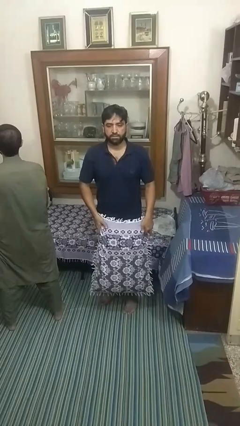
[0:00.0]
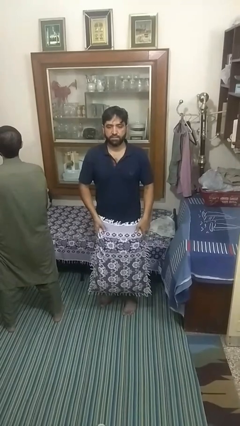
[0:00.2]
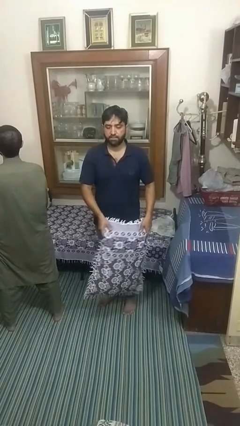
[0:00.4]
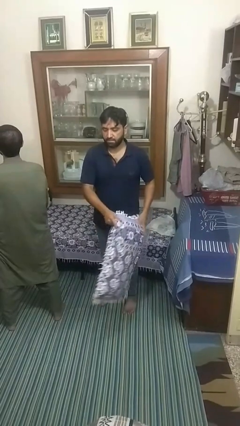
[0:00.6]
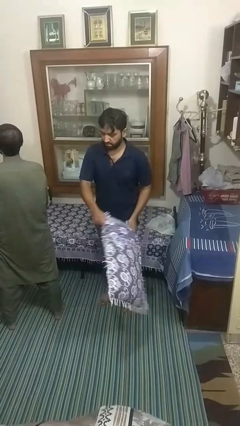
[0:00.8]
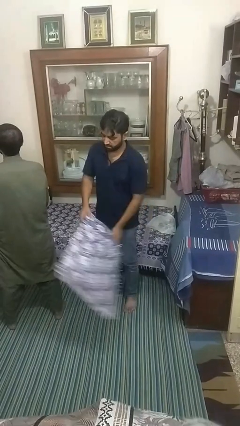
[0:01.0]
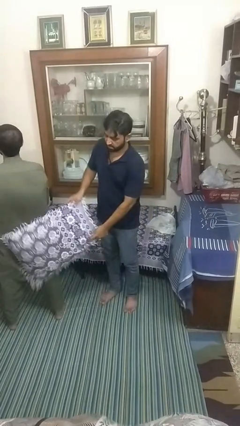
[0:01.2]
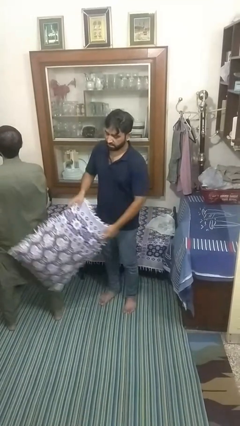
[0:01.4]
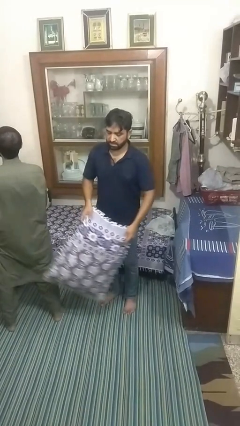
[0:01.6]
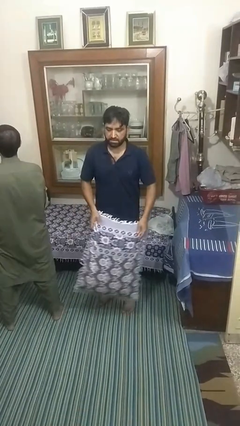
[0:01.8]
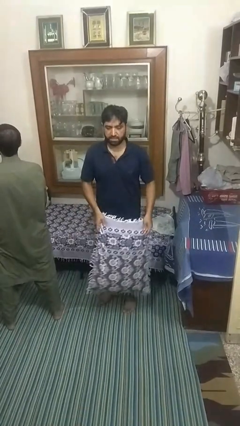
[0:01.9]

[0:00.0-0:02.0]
person hits person with pillow

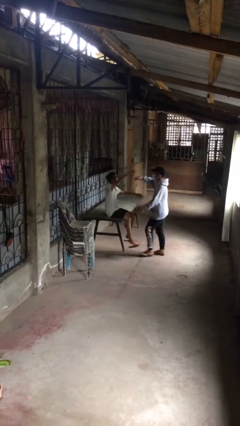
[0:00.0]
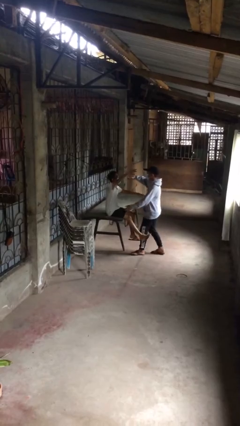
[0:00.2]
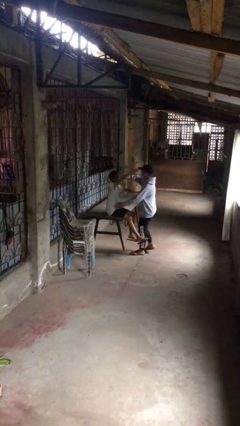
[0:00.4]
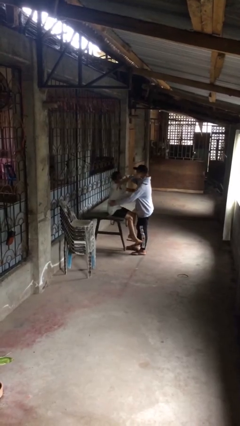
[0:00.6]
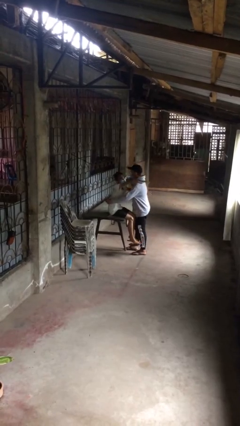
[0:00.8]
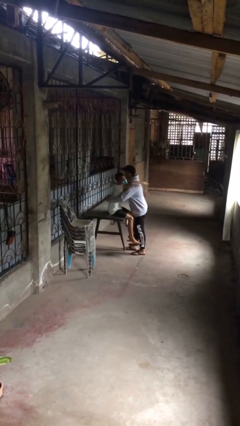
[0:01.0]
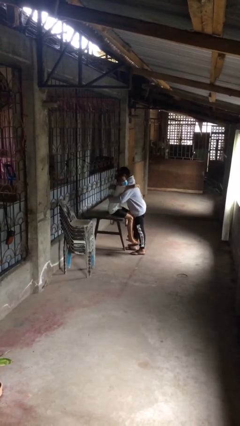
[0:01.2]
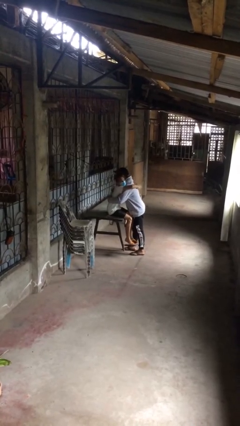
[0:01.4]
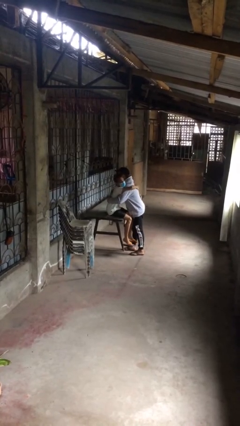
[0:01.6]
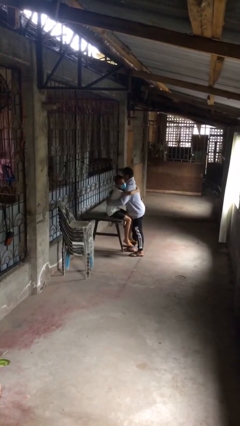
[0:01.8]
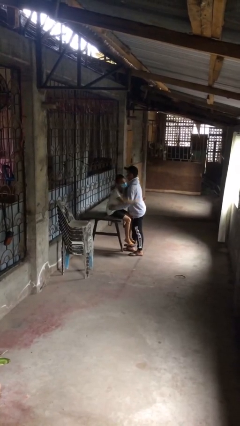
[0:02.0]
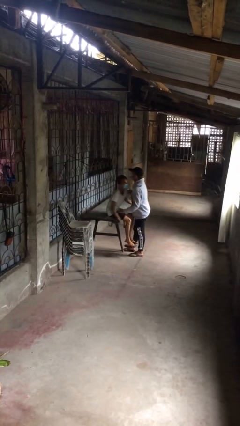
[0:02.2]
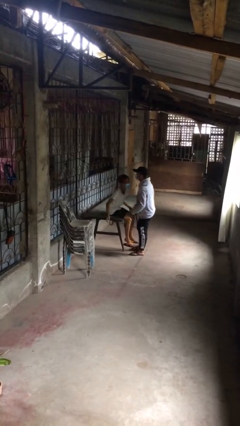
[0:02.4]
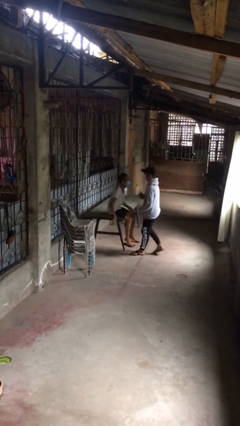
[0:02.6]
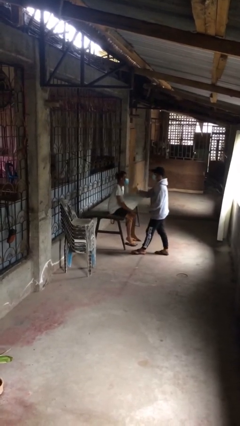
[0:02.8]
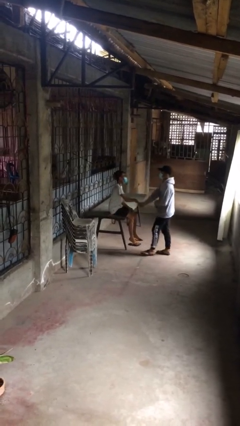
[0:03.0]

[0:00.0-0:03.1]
person embraces person

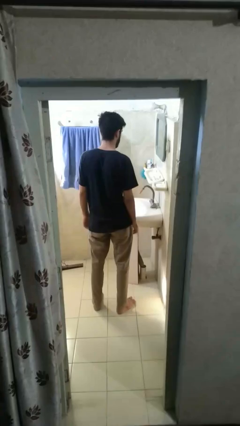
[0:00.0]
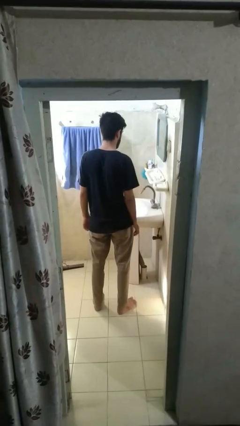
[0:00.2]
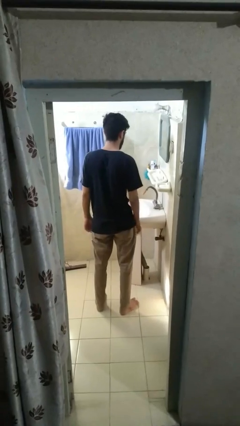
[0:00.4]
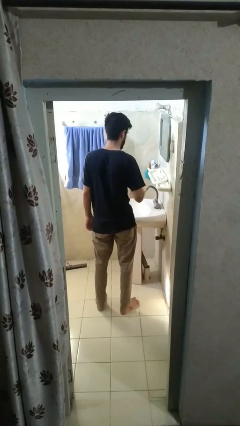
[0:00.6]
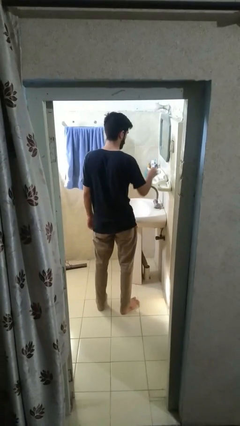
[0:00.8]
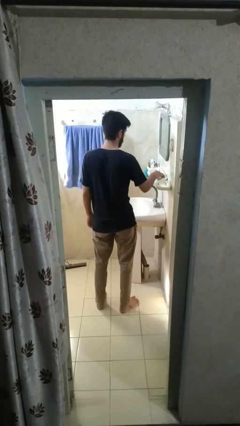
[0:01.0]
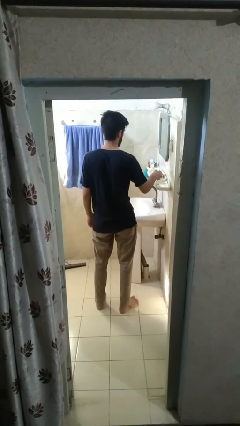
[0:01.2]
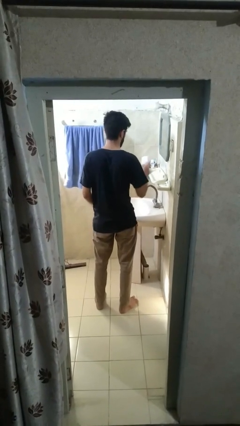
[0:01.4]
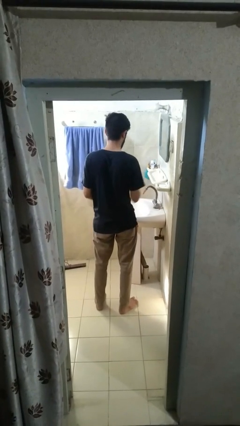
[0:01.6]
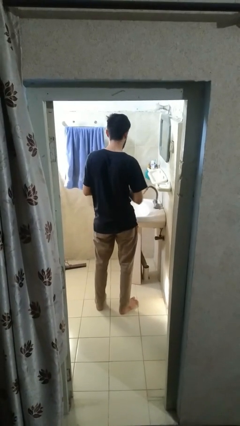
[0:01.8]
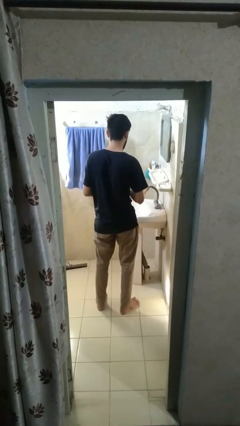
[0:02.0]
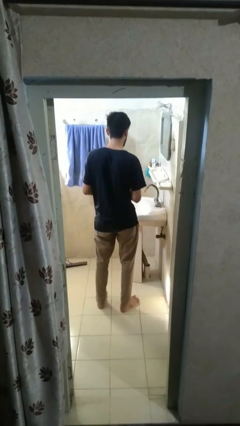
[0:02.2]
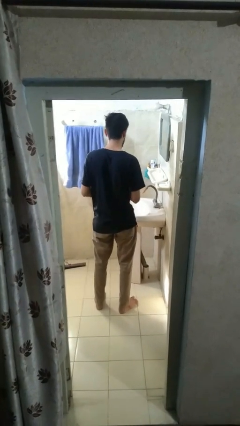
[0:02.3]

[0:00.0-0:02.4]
person picks up object from countertop

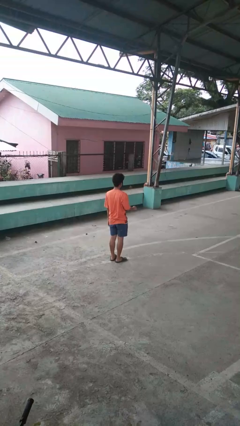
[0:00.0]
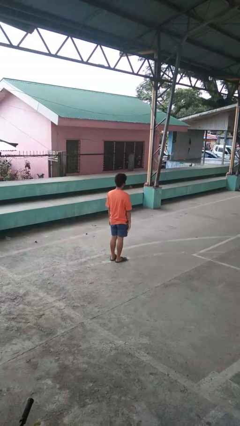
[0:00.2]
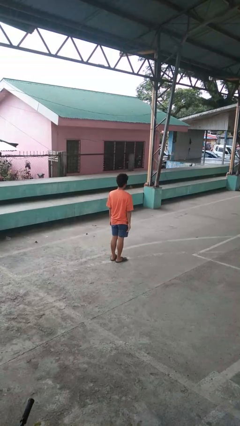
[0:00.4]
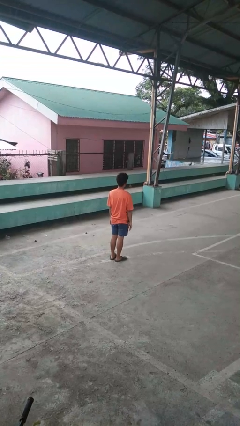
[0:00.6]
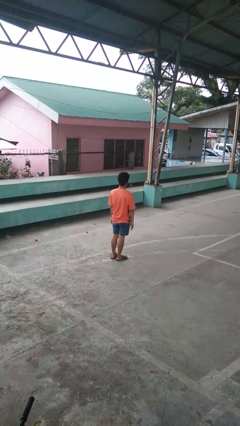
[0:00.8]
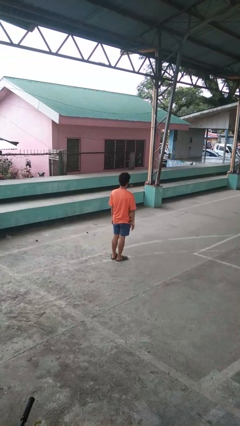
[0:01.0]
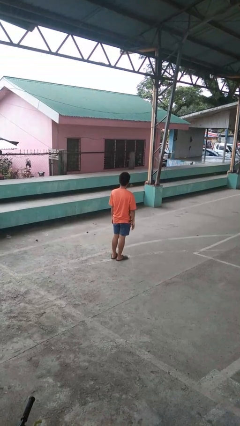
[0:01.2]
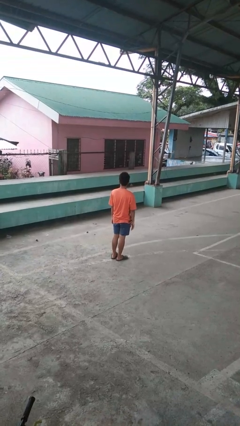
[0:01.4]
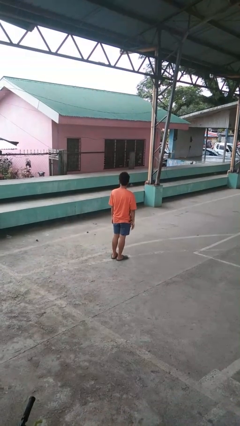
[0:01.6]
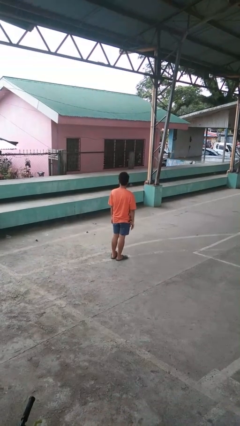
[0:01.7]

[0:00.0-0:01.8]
person gestures lower hand

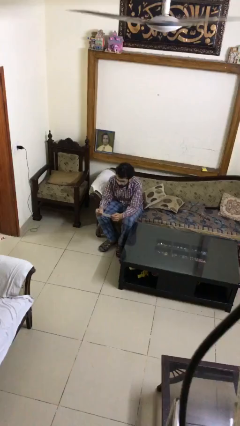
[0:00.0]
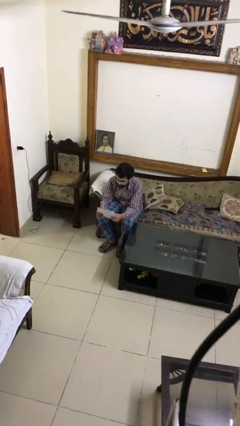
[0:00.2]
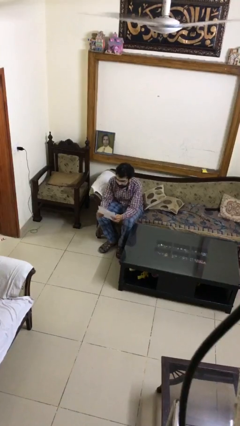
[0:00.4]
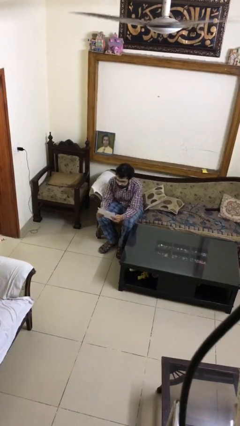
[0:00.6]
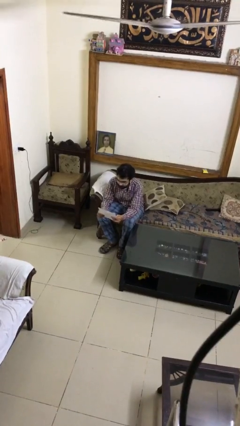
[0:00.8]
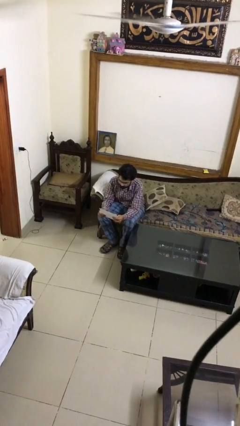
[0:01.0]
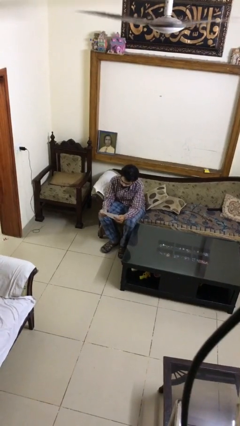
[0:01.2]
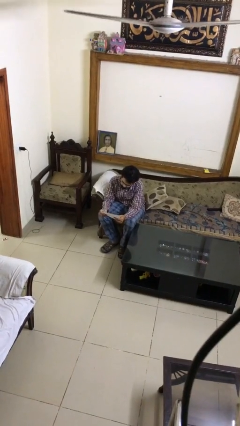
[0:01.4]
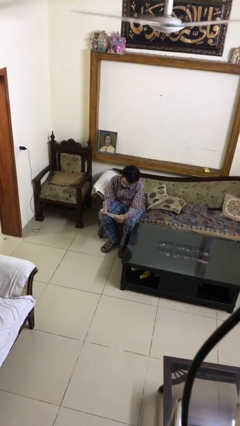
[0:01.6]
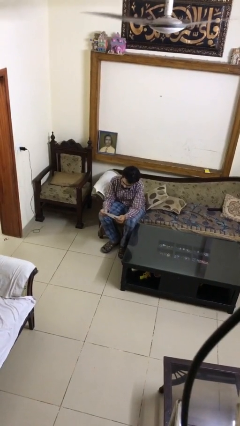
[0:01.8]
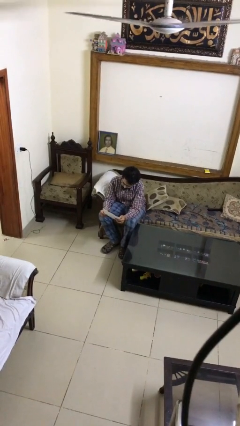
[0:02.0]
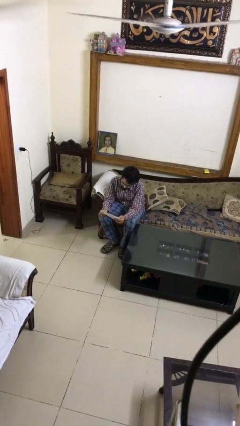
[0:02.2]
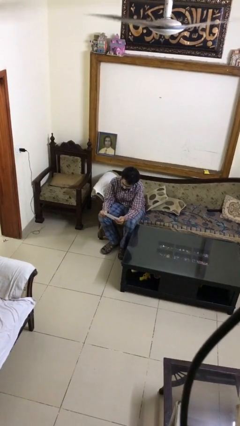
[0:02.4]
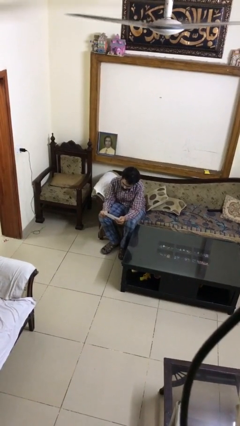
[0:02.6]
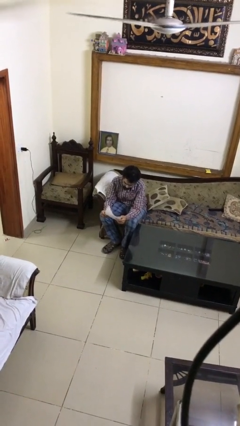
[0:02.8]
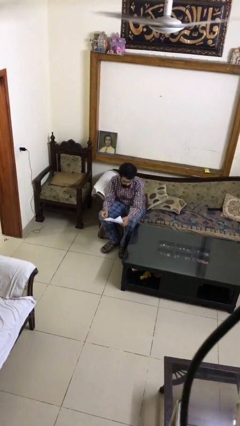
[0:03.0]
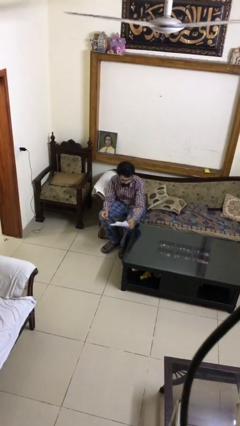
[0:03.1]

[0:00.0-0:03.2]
person reads document

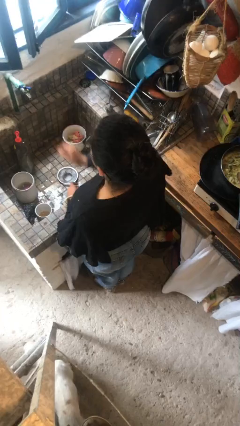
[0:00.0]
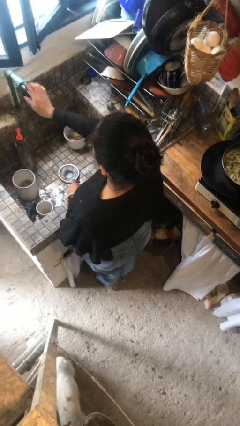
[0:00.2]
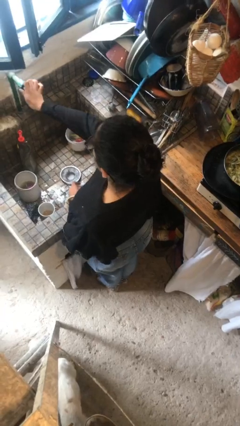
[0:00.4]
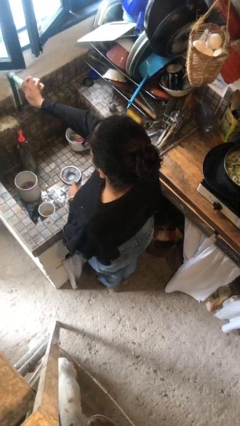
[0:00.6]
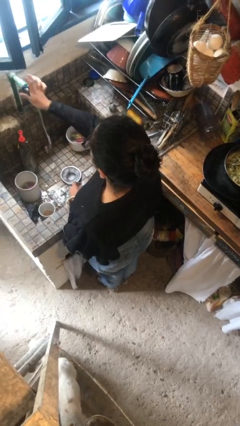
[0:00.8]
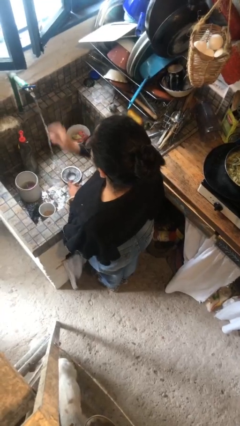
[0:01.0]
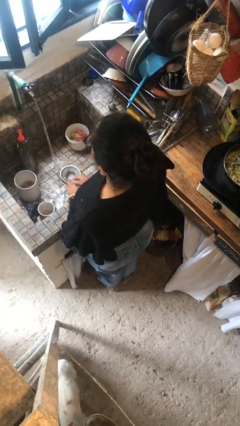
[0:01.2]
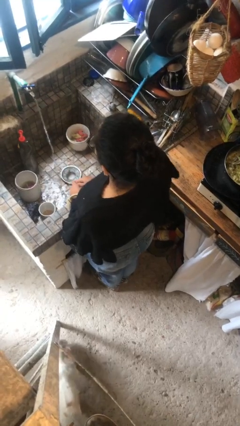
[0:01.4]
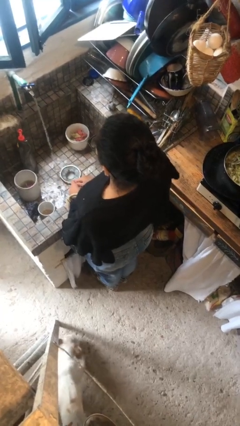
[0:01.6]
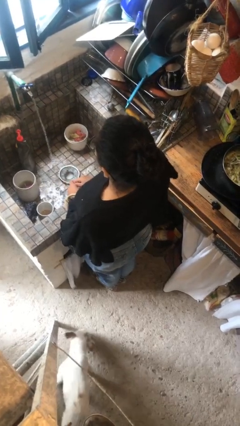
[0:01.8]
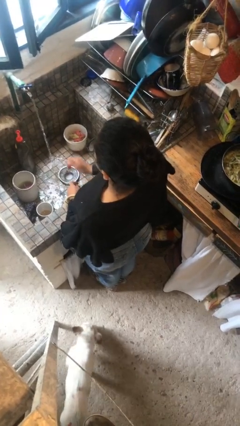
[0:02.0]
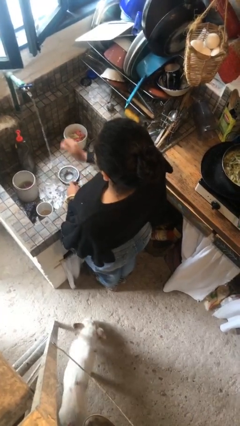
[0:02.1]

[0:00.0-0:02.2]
person turns on faucet

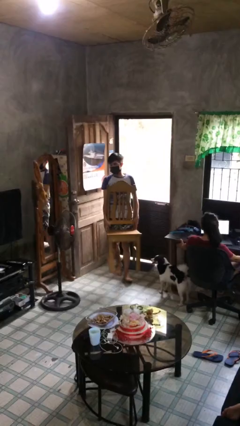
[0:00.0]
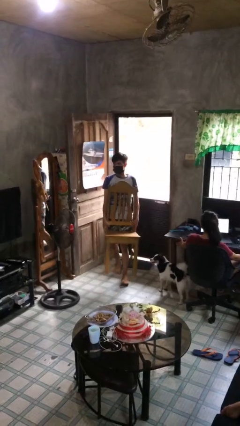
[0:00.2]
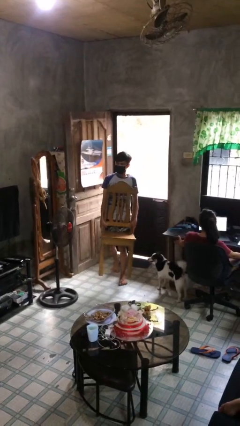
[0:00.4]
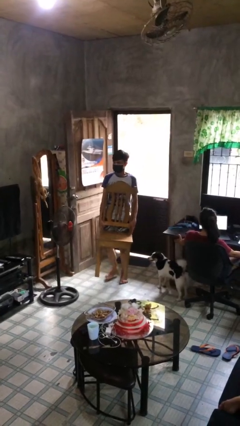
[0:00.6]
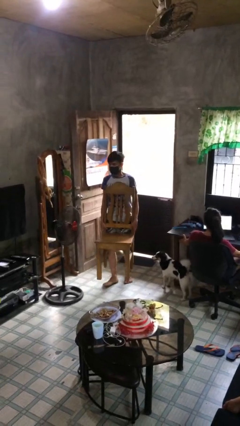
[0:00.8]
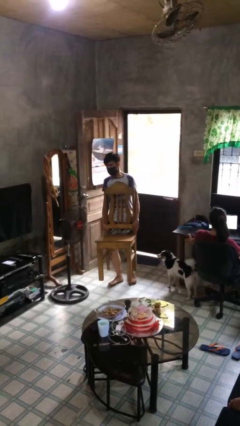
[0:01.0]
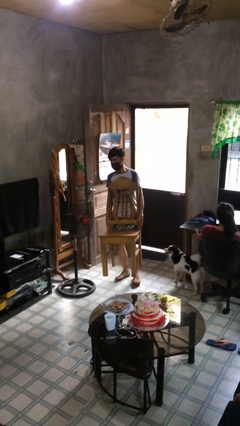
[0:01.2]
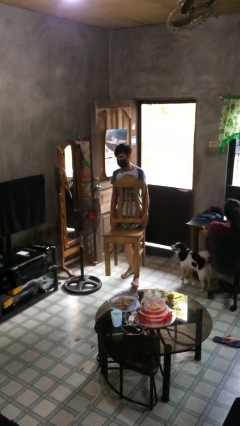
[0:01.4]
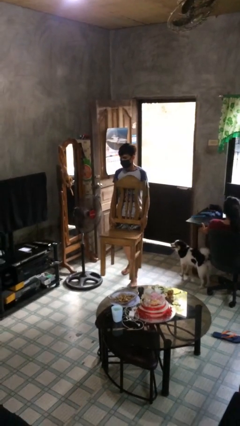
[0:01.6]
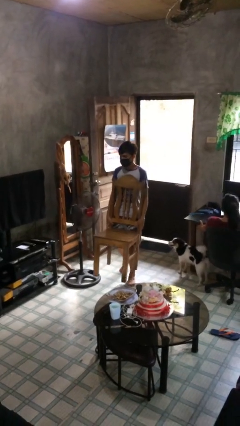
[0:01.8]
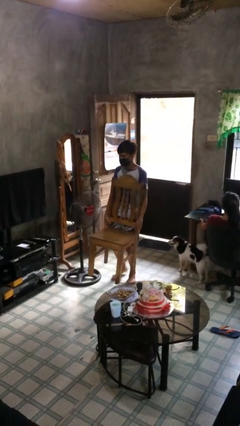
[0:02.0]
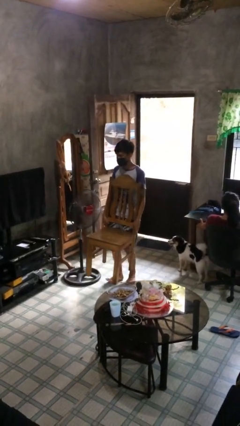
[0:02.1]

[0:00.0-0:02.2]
person carries heavy object

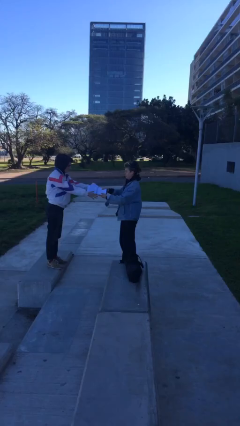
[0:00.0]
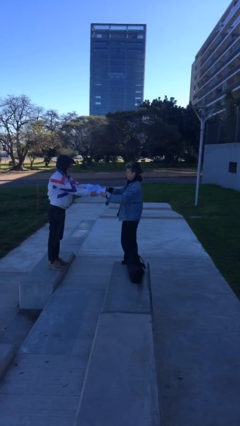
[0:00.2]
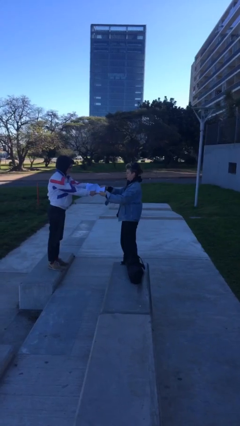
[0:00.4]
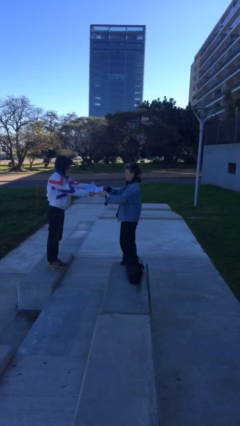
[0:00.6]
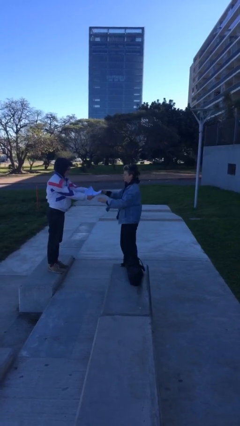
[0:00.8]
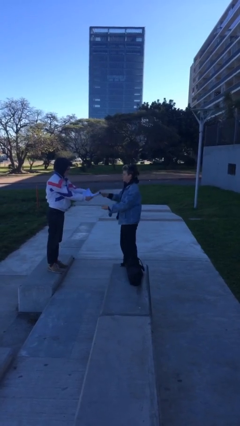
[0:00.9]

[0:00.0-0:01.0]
person transfers object to person
